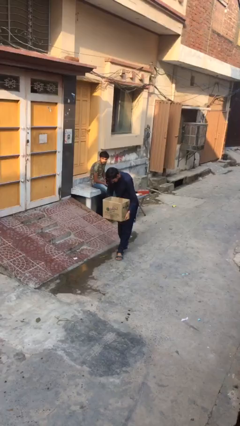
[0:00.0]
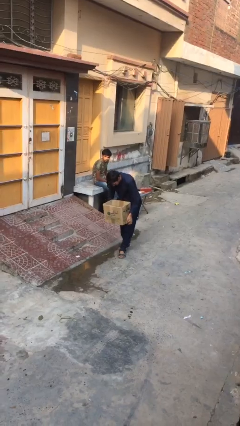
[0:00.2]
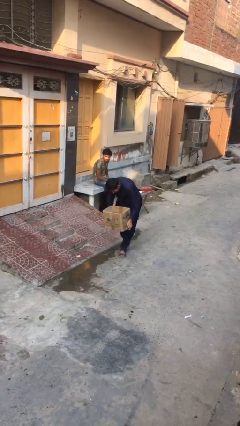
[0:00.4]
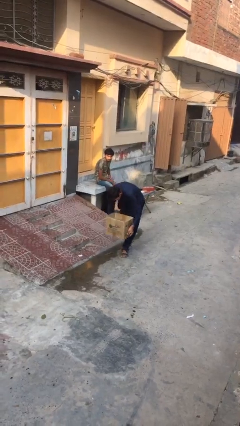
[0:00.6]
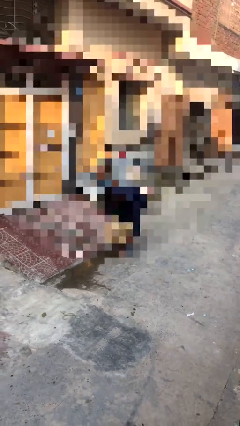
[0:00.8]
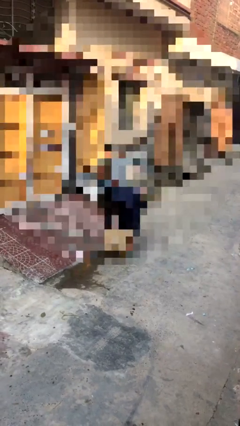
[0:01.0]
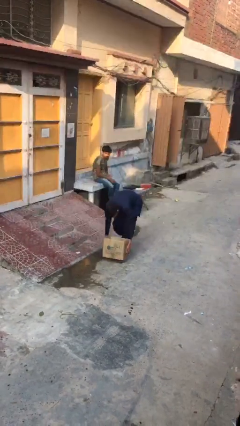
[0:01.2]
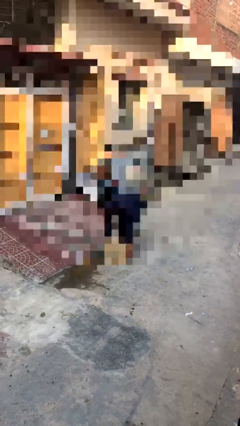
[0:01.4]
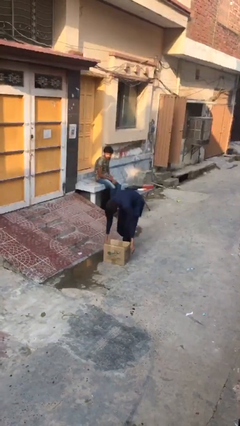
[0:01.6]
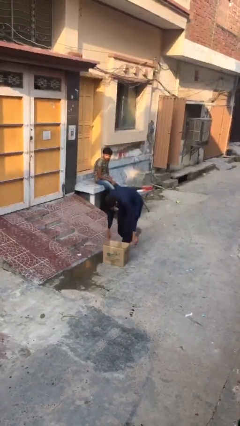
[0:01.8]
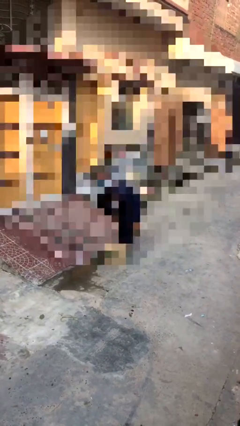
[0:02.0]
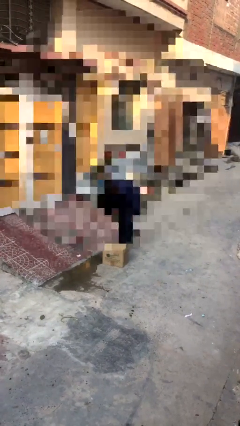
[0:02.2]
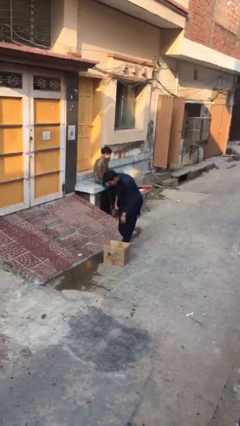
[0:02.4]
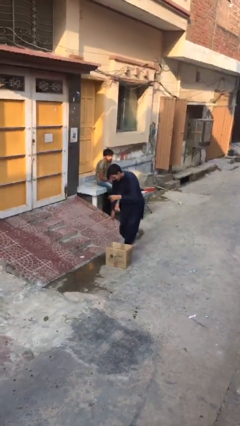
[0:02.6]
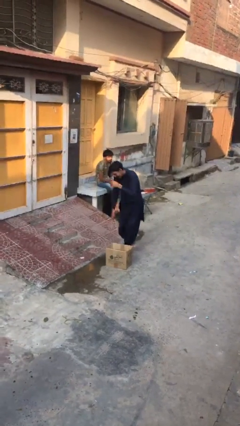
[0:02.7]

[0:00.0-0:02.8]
person puts down object on floor

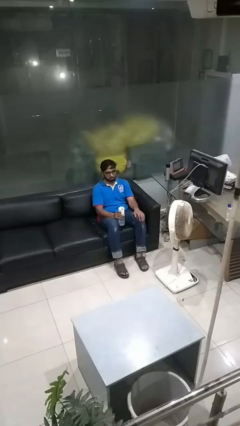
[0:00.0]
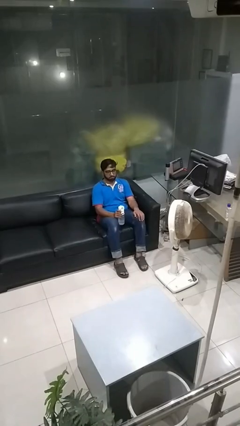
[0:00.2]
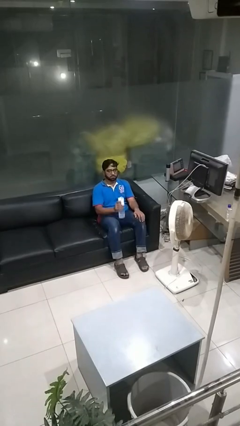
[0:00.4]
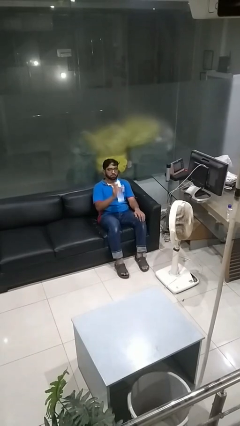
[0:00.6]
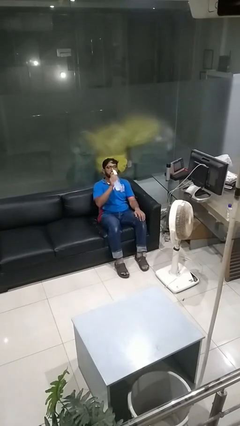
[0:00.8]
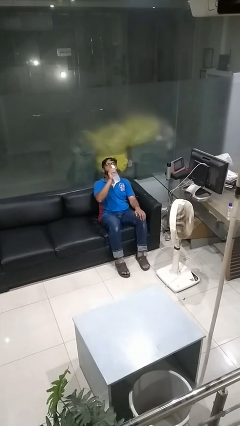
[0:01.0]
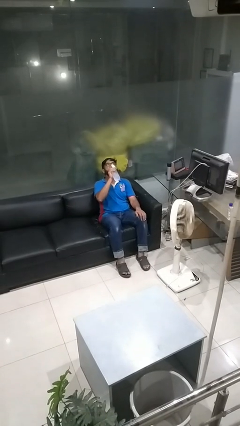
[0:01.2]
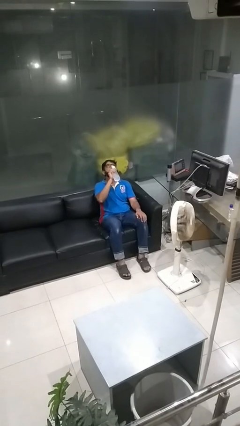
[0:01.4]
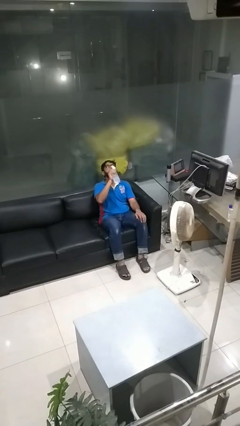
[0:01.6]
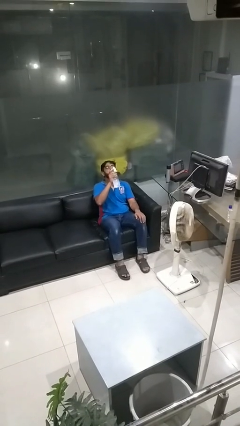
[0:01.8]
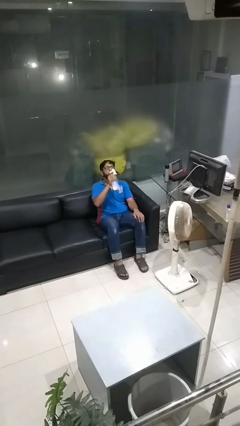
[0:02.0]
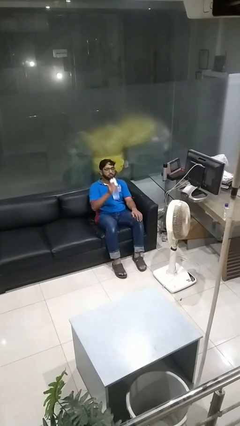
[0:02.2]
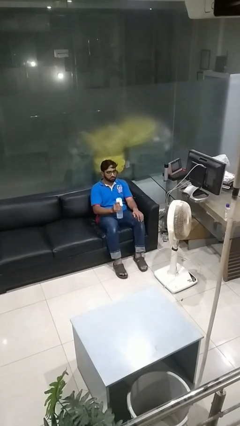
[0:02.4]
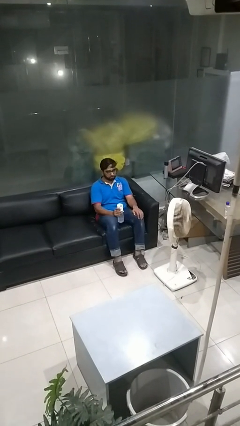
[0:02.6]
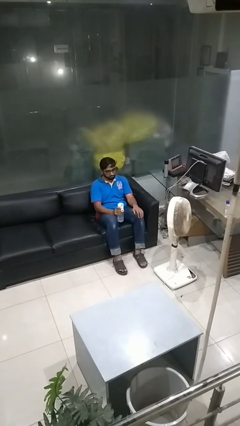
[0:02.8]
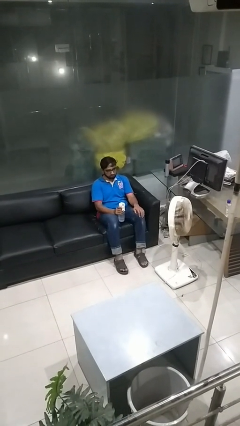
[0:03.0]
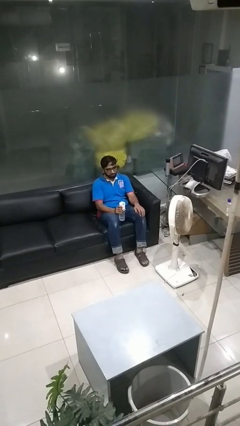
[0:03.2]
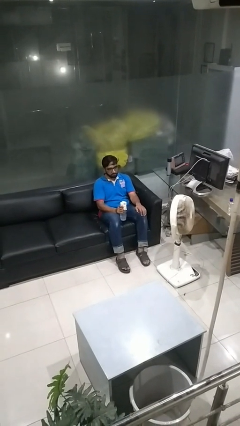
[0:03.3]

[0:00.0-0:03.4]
person drinks from bottle

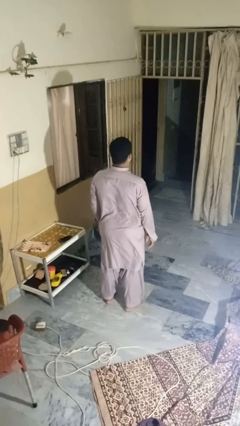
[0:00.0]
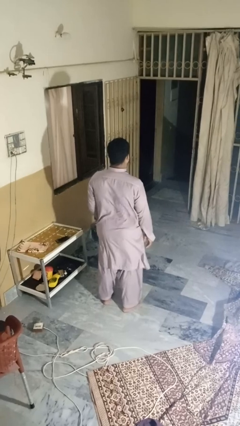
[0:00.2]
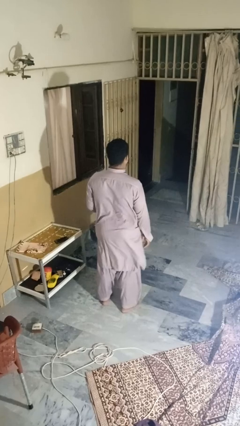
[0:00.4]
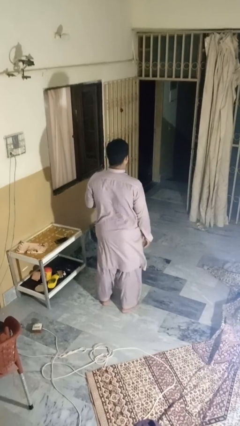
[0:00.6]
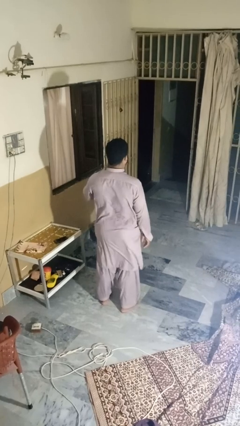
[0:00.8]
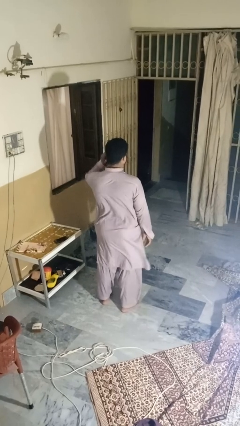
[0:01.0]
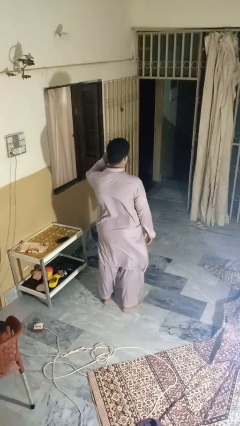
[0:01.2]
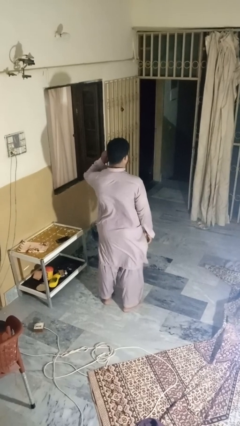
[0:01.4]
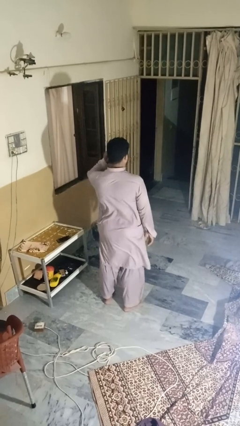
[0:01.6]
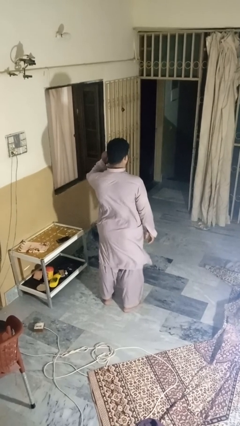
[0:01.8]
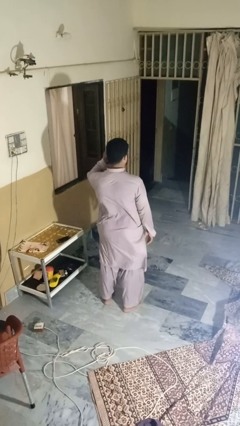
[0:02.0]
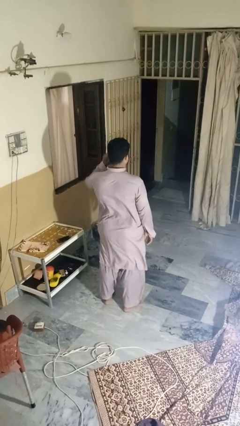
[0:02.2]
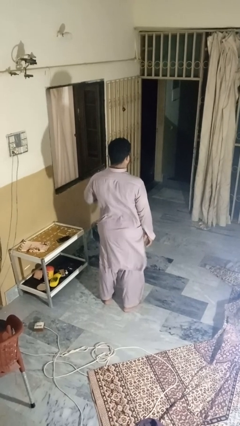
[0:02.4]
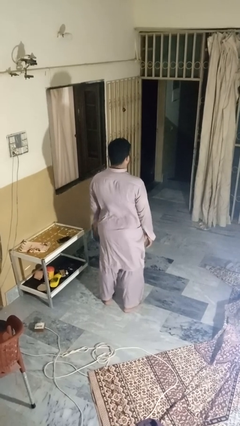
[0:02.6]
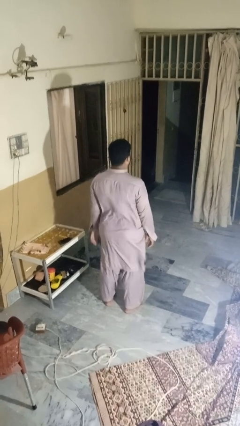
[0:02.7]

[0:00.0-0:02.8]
person touches earlobe

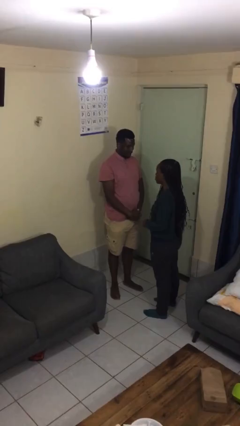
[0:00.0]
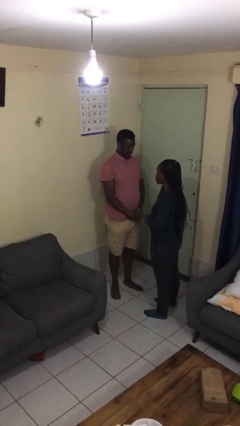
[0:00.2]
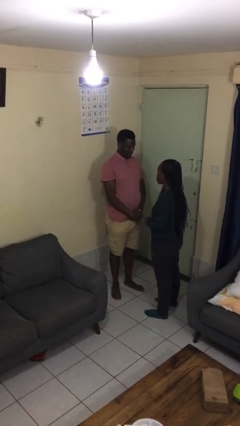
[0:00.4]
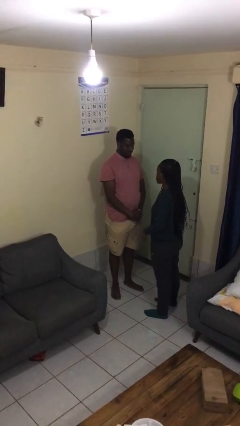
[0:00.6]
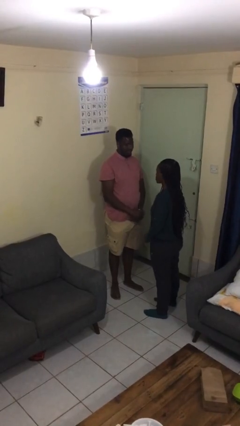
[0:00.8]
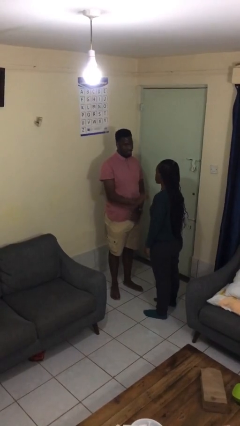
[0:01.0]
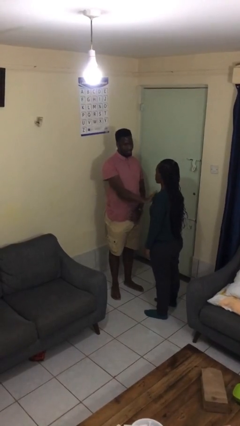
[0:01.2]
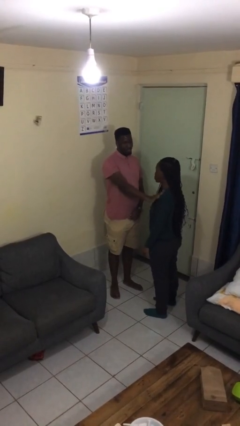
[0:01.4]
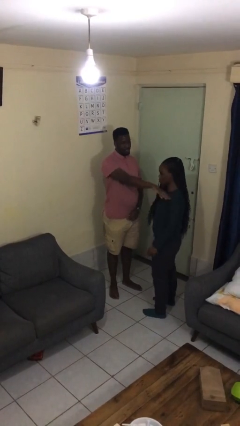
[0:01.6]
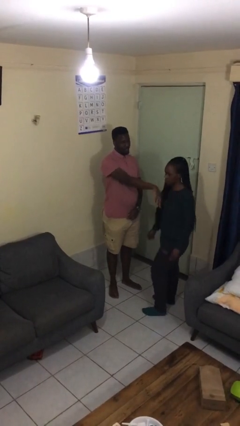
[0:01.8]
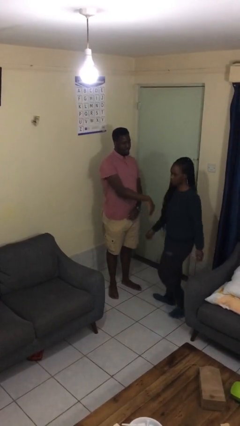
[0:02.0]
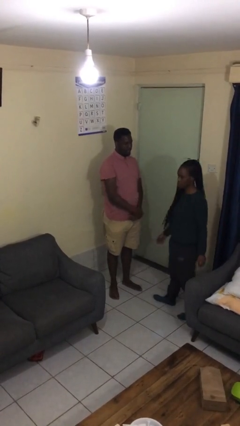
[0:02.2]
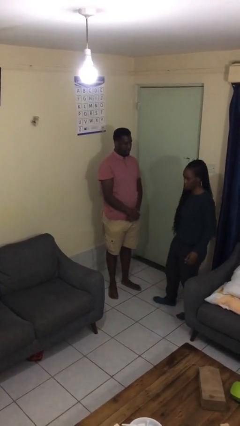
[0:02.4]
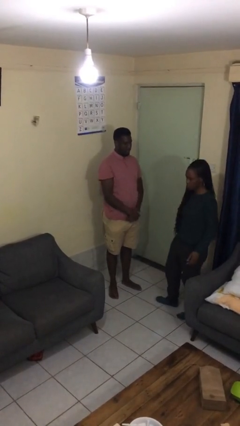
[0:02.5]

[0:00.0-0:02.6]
person shoves person

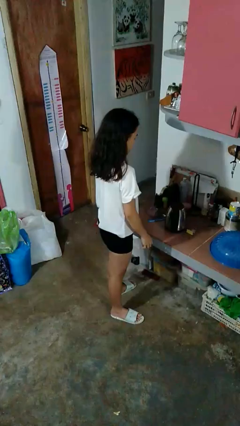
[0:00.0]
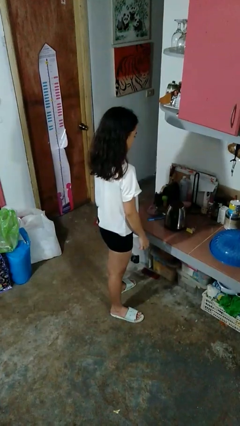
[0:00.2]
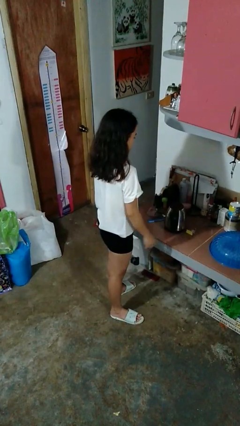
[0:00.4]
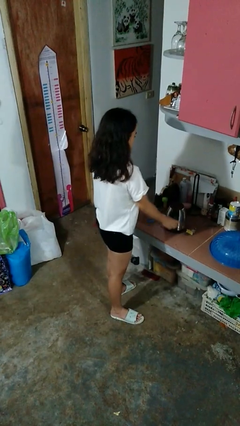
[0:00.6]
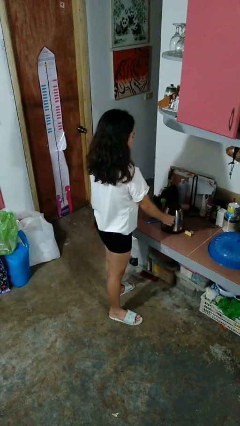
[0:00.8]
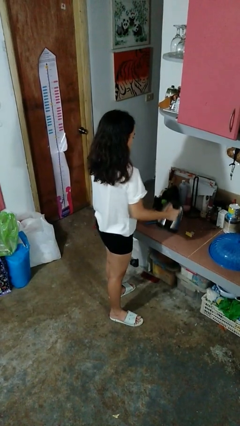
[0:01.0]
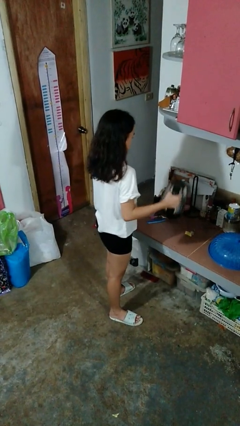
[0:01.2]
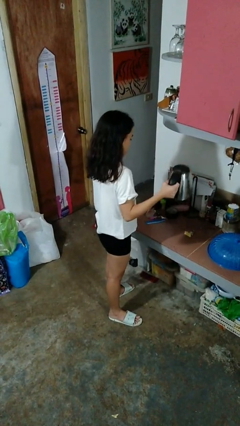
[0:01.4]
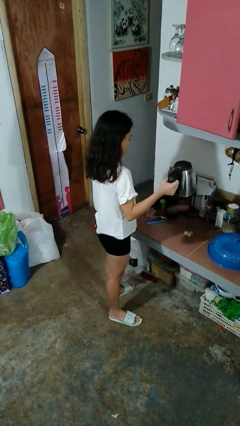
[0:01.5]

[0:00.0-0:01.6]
person picks up object from countertop

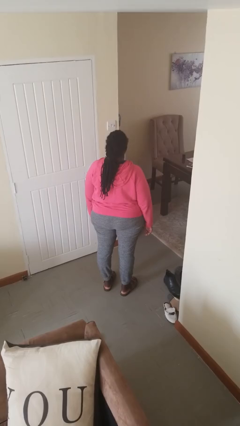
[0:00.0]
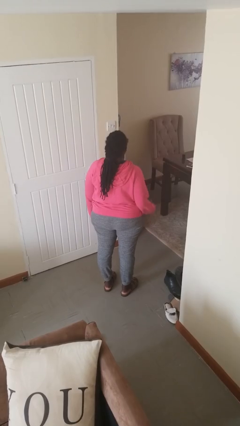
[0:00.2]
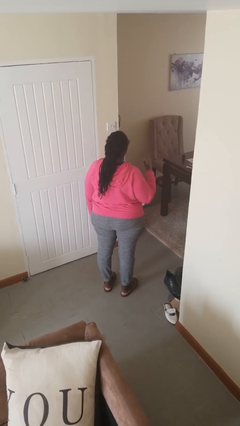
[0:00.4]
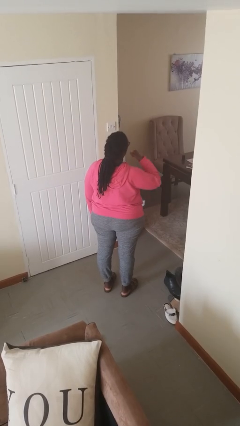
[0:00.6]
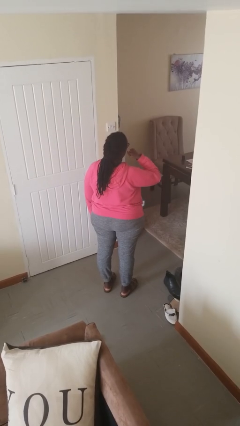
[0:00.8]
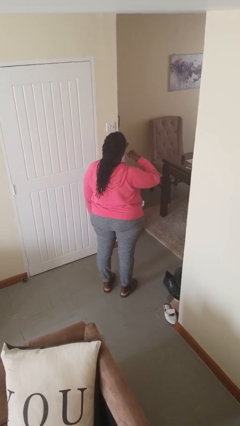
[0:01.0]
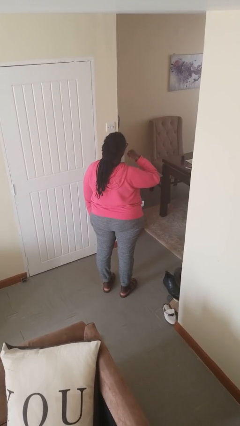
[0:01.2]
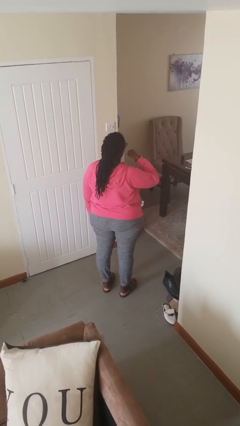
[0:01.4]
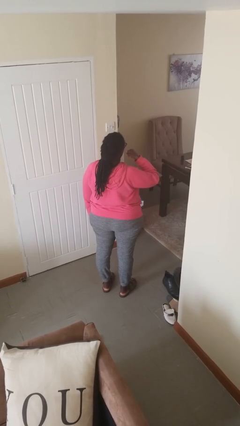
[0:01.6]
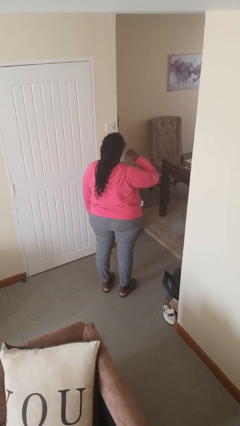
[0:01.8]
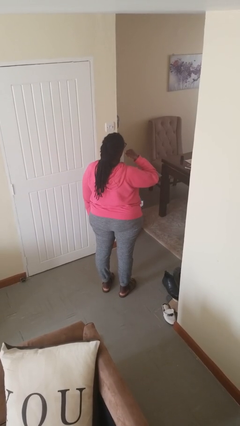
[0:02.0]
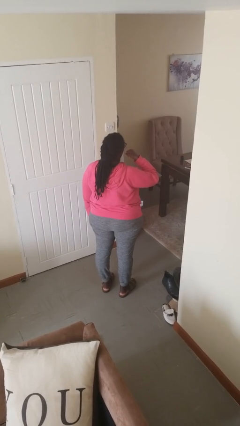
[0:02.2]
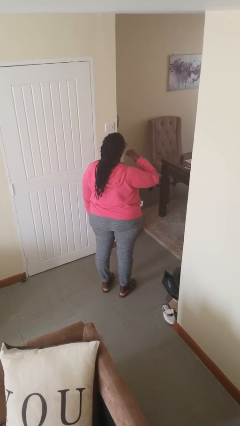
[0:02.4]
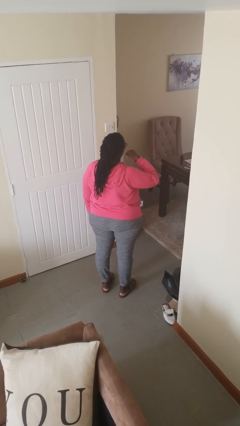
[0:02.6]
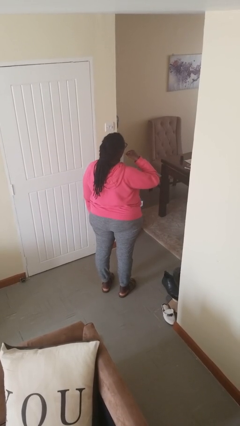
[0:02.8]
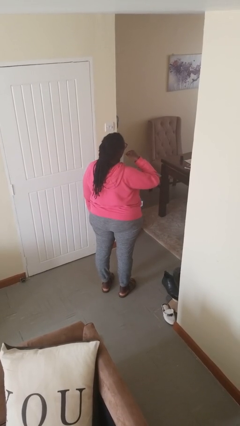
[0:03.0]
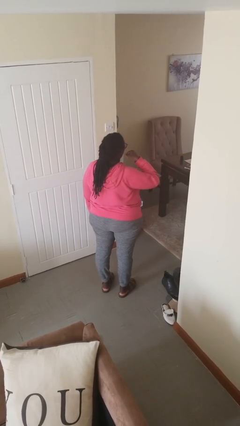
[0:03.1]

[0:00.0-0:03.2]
person gestures call me

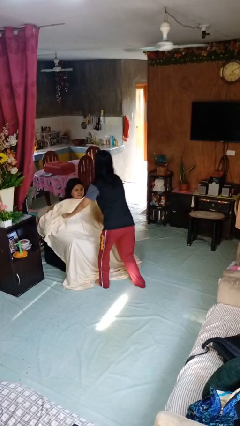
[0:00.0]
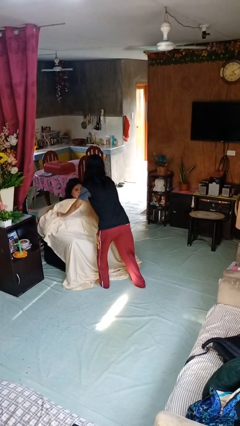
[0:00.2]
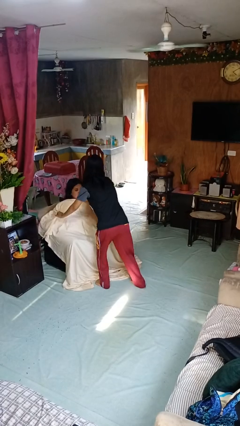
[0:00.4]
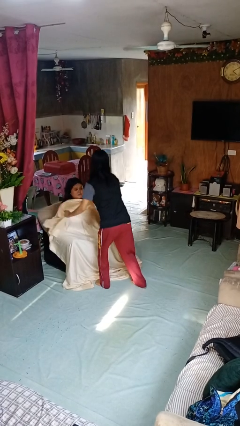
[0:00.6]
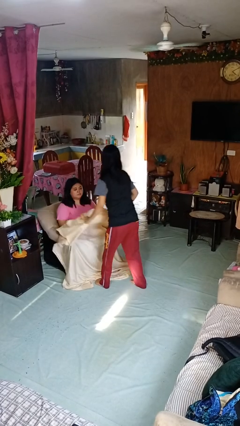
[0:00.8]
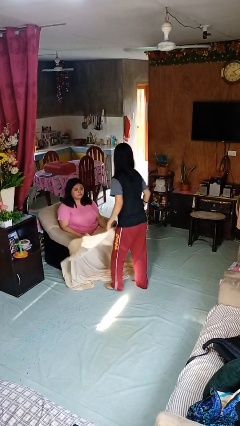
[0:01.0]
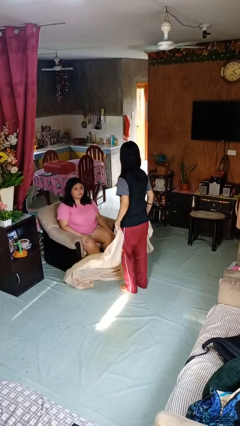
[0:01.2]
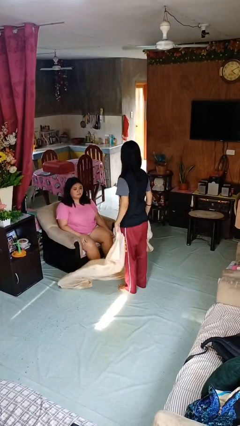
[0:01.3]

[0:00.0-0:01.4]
person uncovers friend with blanket
